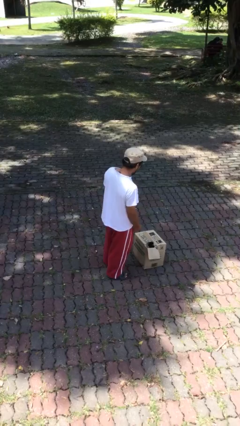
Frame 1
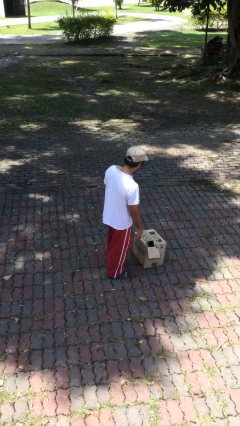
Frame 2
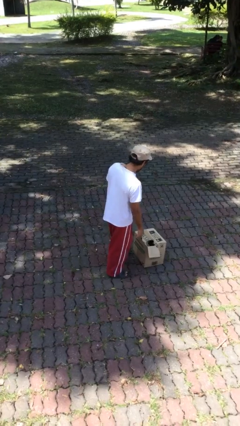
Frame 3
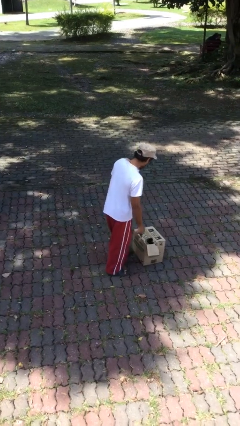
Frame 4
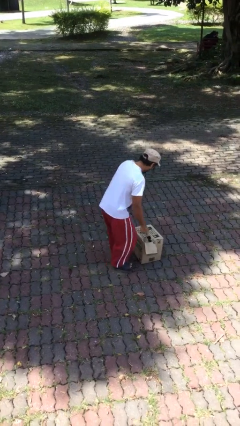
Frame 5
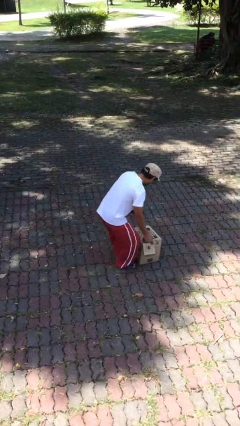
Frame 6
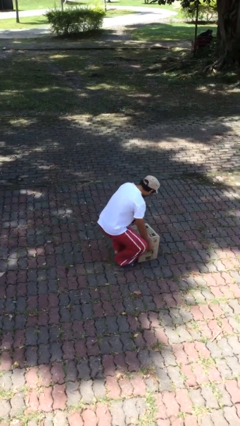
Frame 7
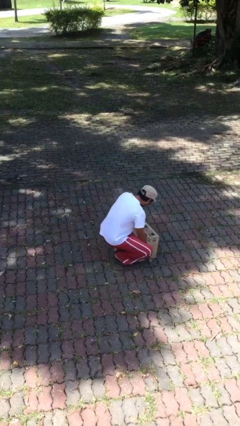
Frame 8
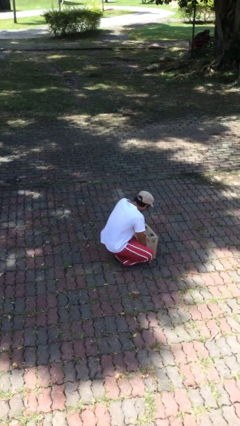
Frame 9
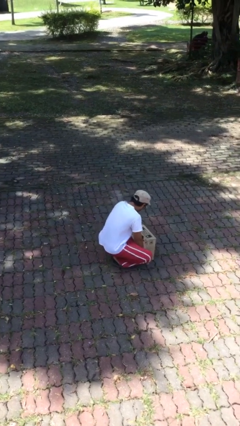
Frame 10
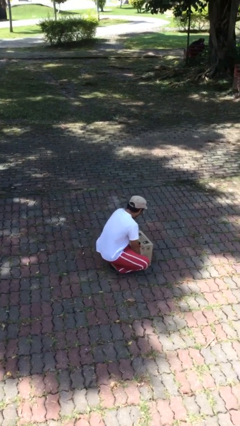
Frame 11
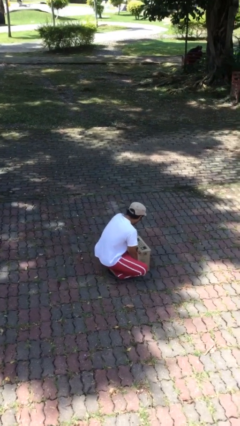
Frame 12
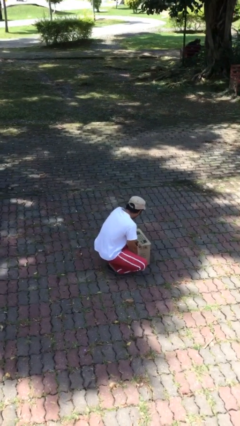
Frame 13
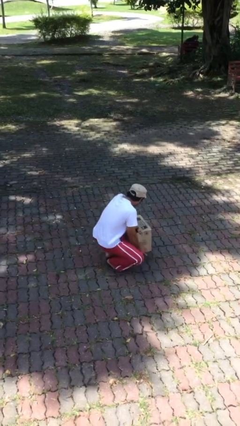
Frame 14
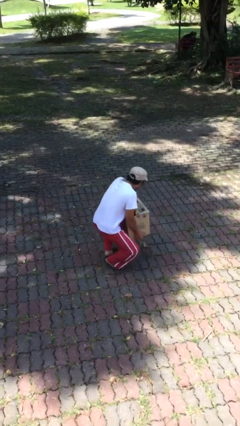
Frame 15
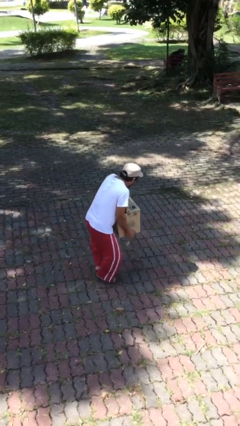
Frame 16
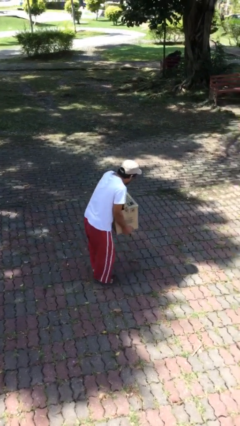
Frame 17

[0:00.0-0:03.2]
person picks up object from floor

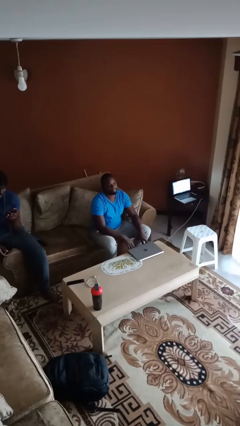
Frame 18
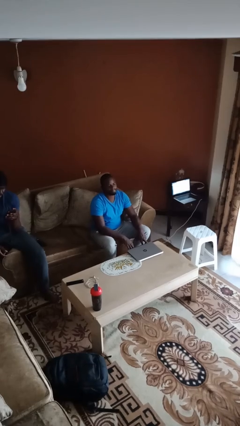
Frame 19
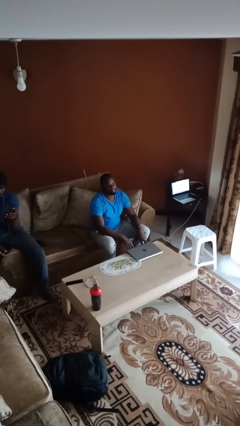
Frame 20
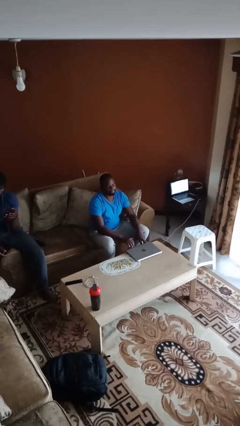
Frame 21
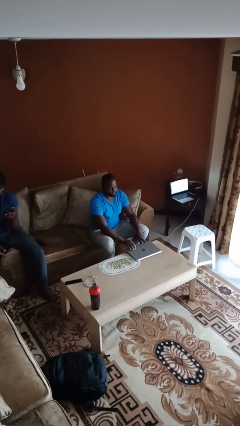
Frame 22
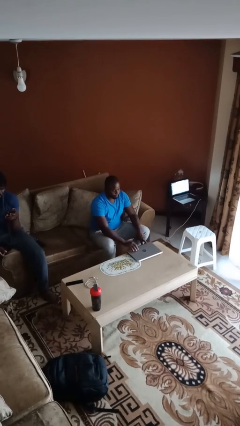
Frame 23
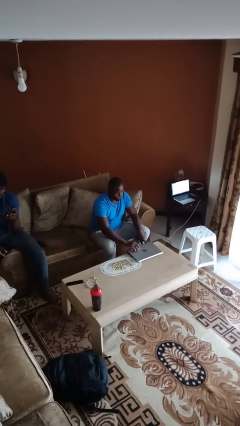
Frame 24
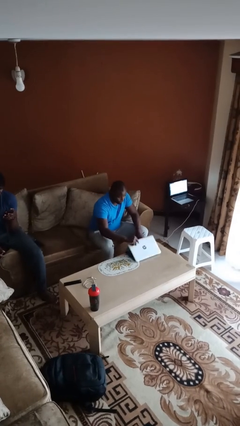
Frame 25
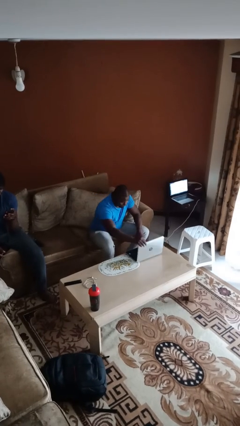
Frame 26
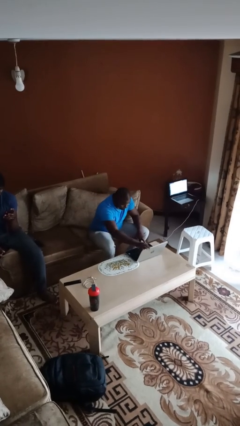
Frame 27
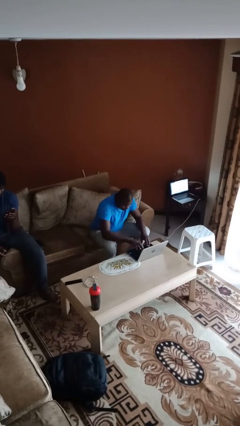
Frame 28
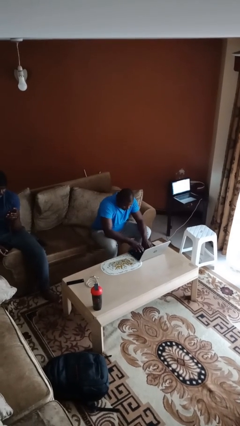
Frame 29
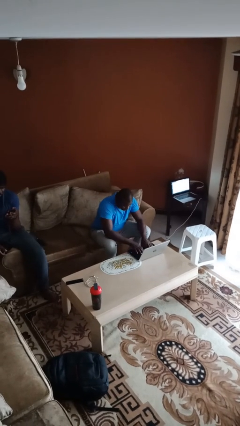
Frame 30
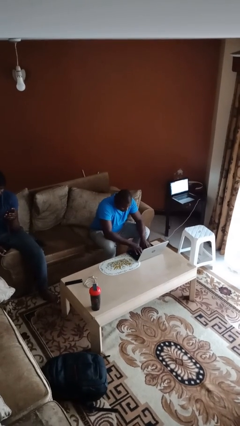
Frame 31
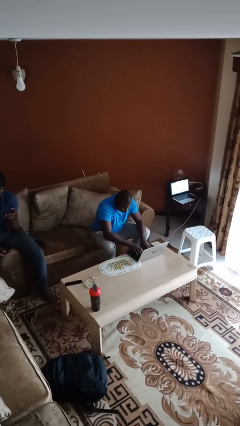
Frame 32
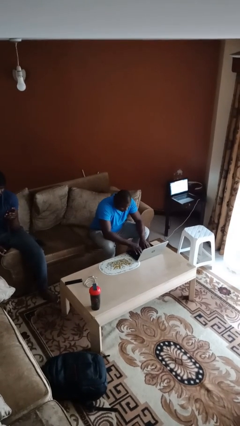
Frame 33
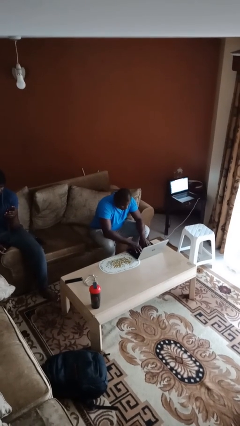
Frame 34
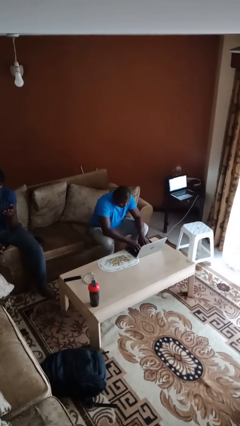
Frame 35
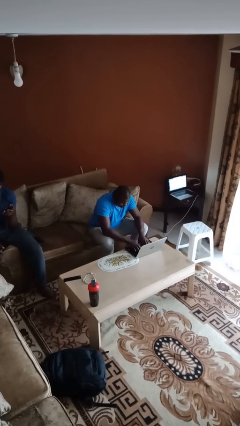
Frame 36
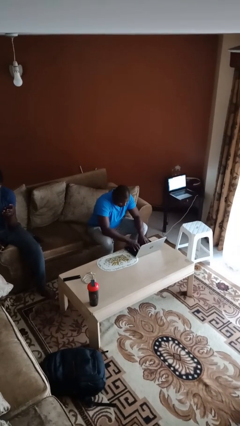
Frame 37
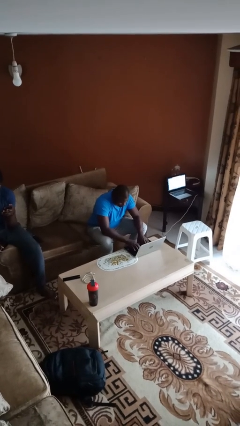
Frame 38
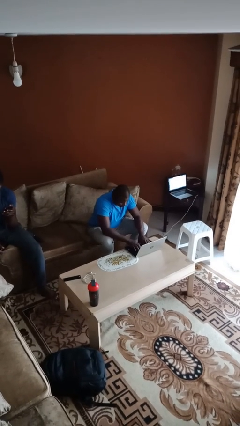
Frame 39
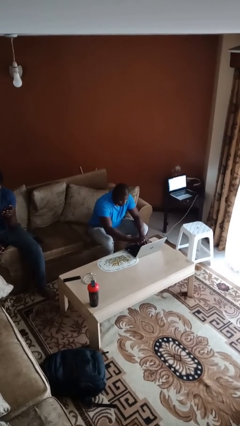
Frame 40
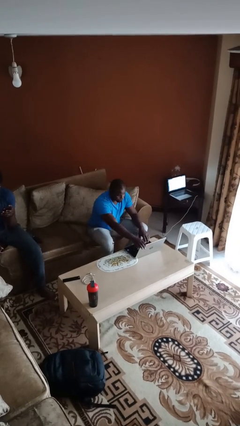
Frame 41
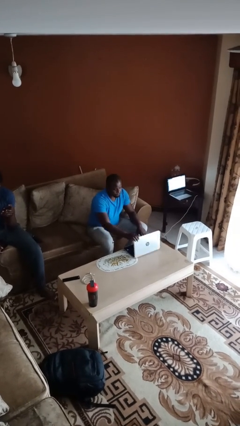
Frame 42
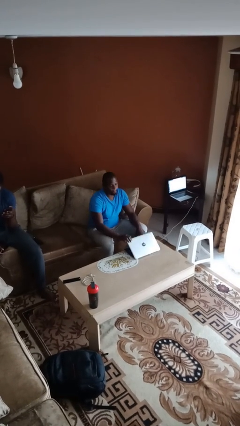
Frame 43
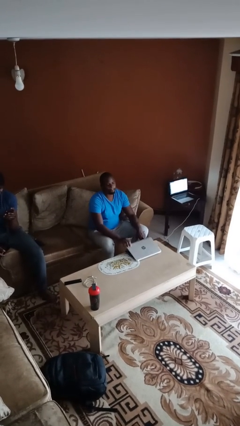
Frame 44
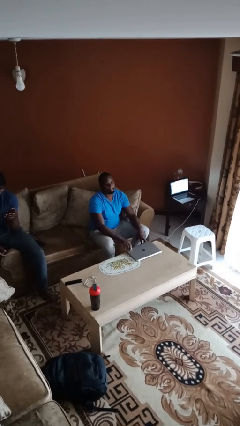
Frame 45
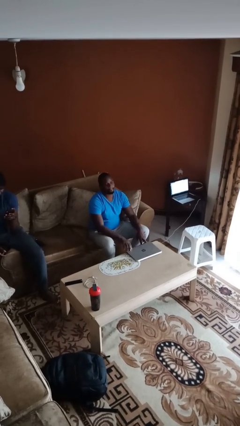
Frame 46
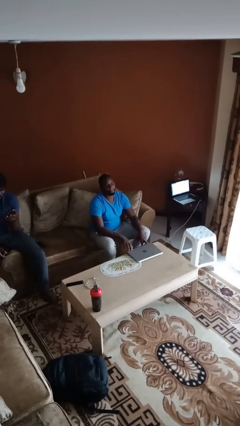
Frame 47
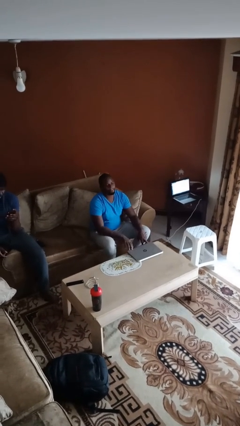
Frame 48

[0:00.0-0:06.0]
person interacts with laptop

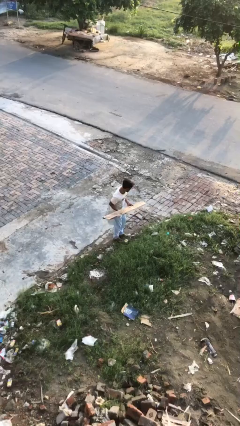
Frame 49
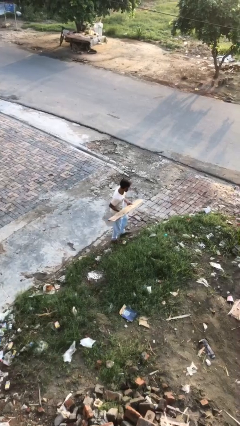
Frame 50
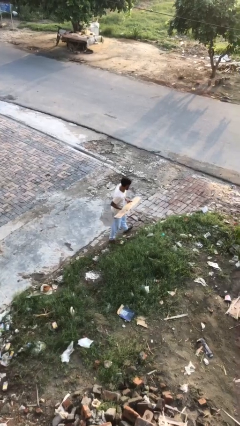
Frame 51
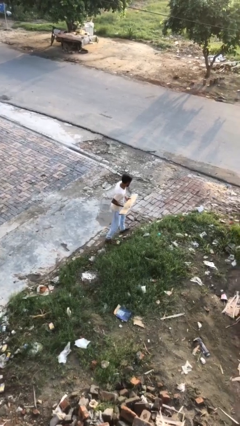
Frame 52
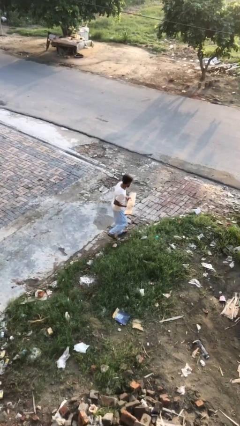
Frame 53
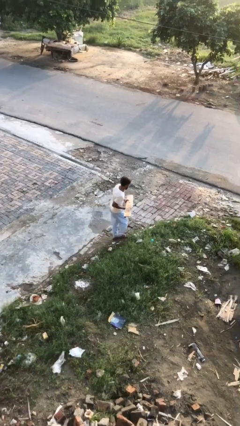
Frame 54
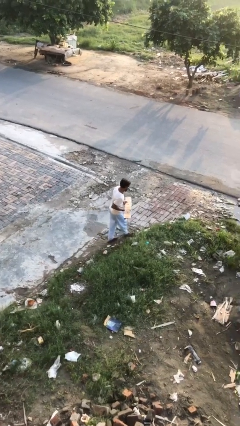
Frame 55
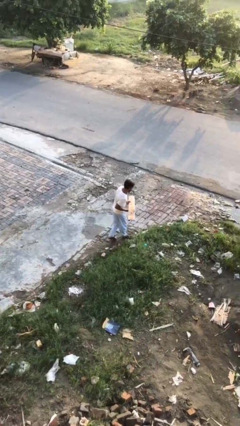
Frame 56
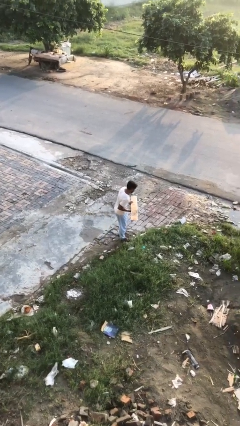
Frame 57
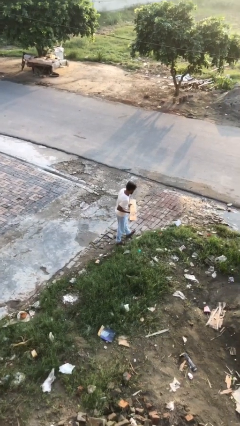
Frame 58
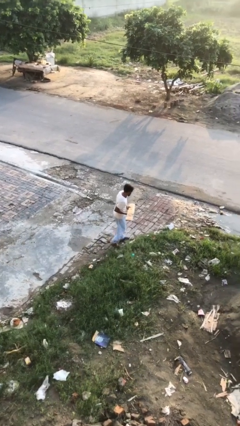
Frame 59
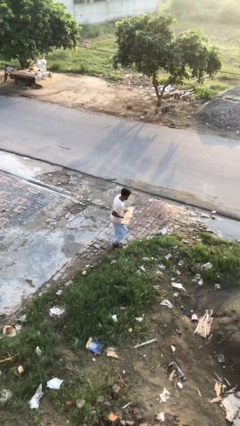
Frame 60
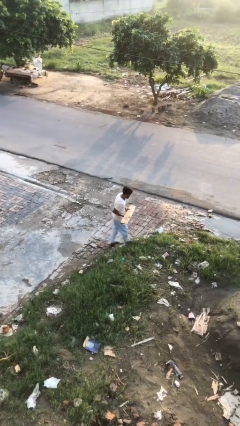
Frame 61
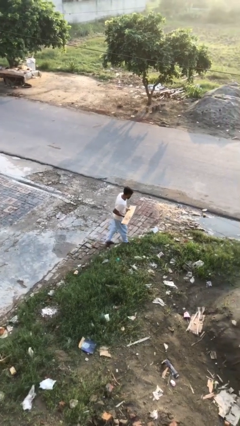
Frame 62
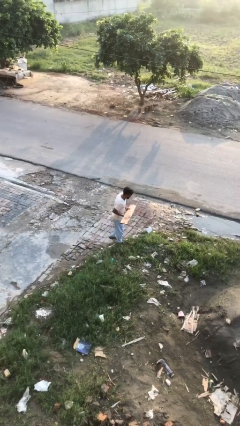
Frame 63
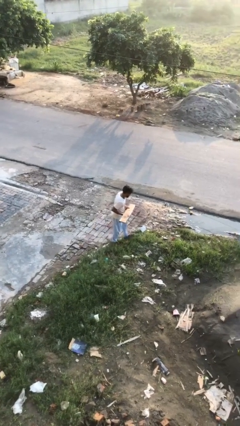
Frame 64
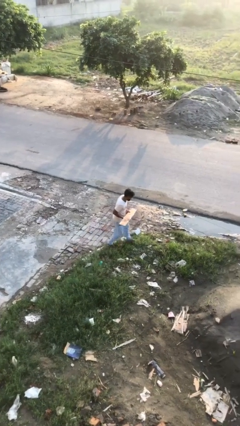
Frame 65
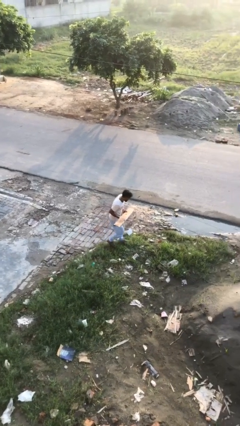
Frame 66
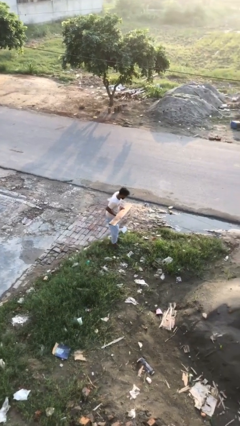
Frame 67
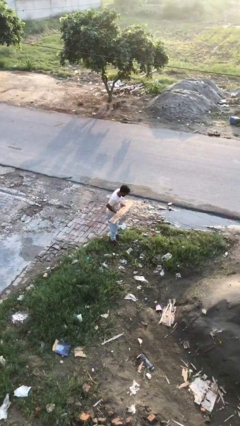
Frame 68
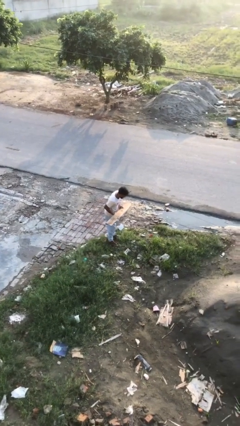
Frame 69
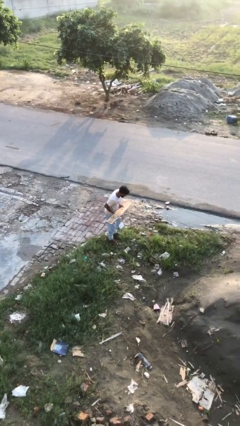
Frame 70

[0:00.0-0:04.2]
person carries heavy object

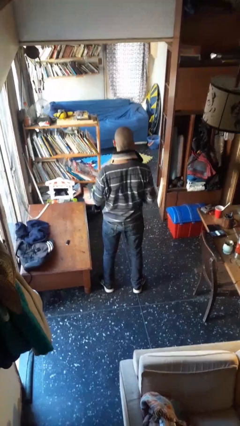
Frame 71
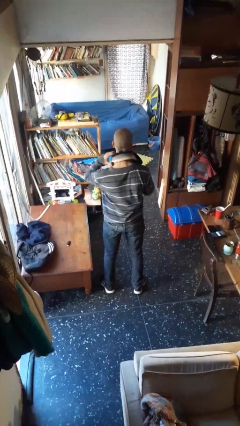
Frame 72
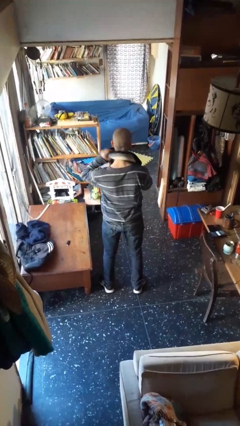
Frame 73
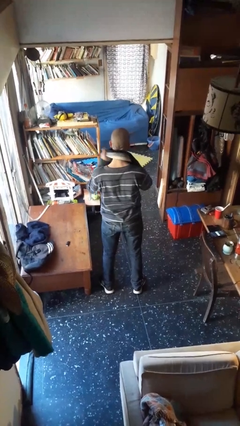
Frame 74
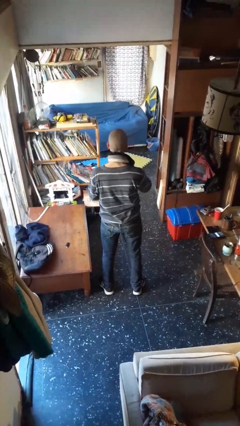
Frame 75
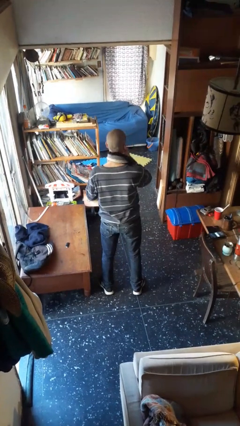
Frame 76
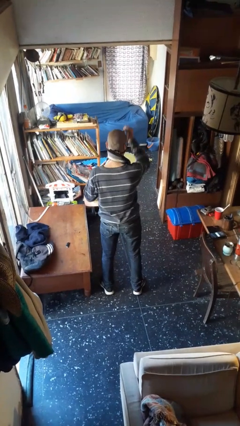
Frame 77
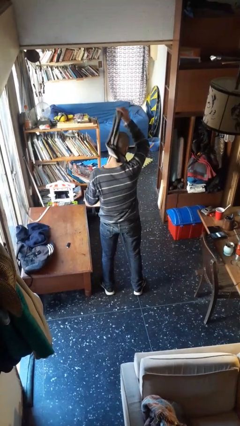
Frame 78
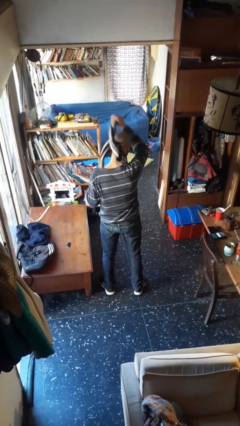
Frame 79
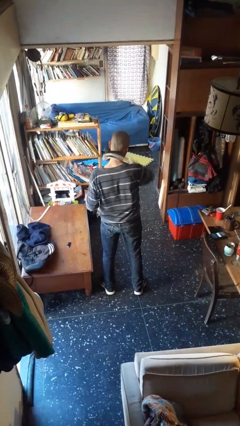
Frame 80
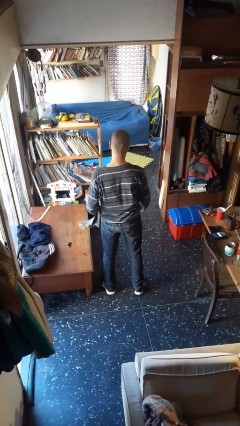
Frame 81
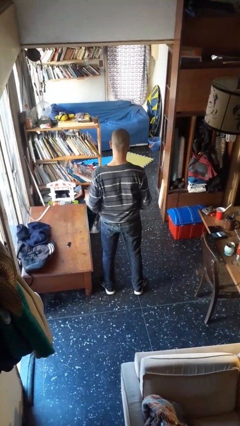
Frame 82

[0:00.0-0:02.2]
person takes off scarf

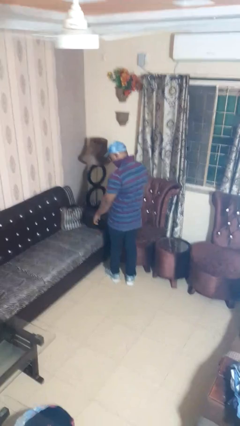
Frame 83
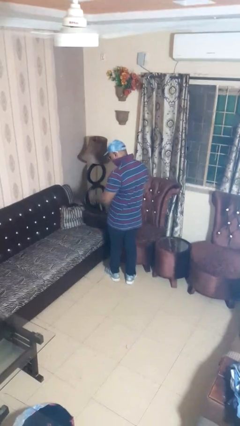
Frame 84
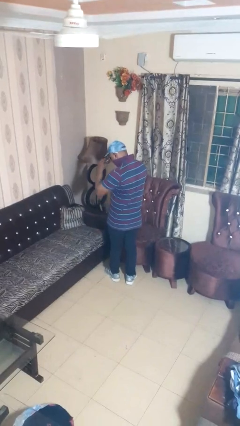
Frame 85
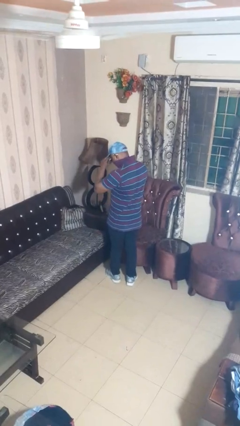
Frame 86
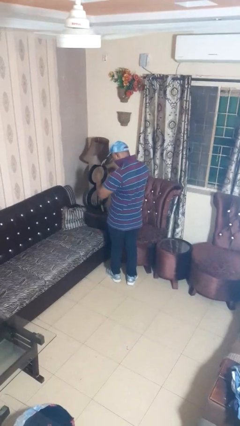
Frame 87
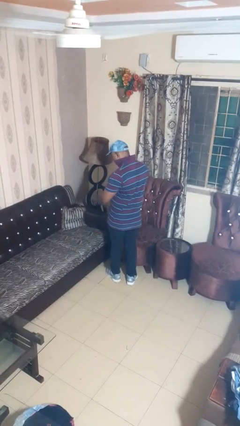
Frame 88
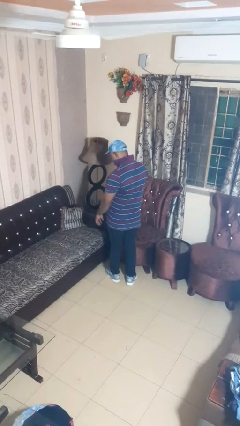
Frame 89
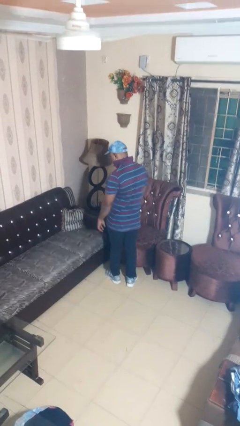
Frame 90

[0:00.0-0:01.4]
person takes off sunglasses

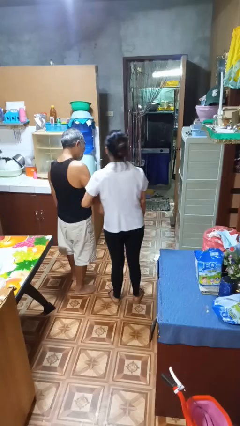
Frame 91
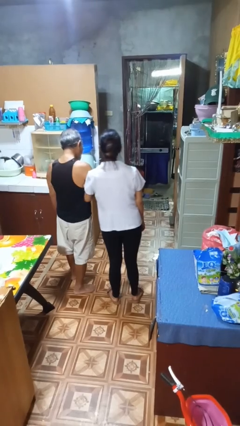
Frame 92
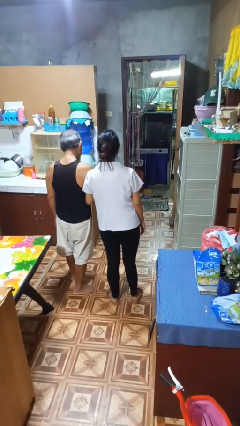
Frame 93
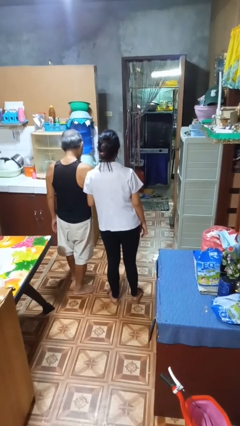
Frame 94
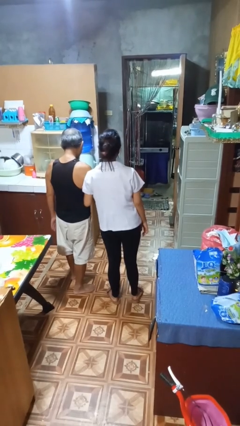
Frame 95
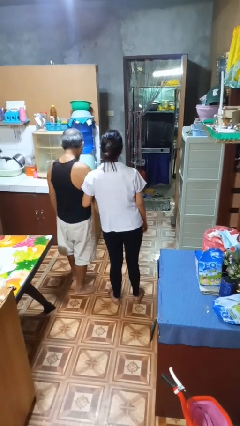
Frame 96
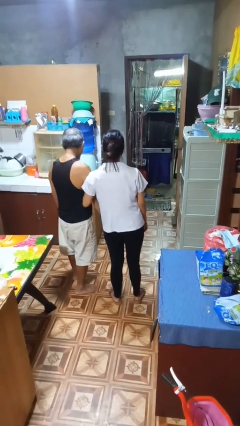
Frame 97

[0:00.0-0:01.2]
person grabs person by forearm
